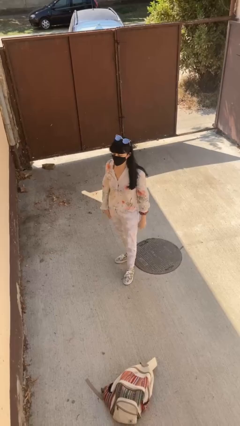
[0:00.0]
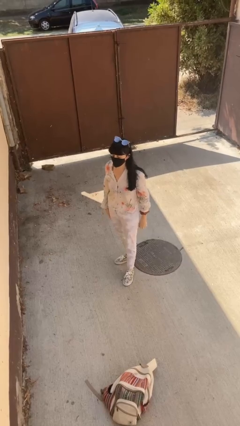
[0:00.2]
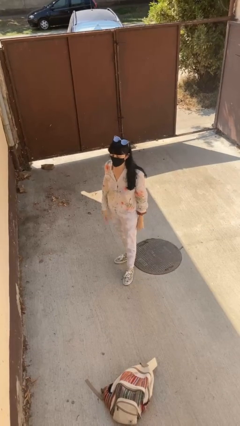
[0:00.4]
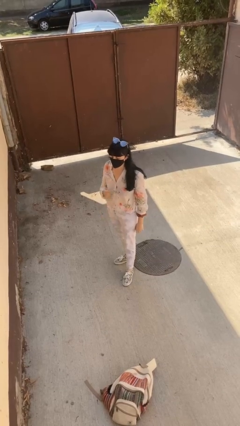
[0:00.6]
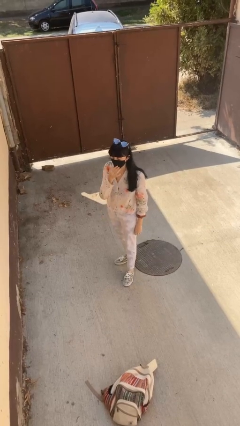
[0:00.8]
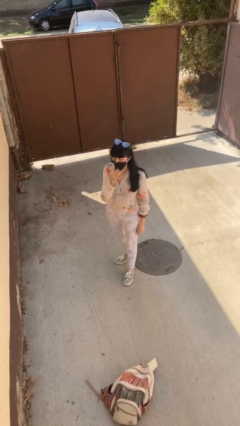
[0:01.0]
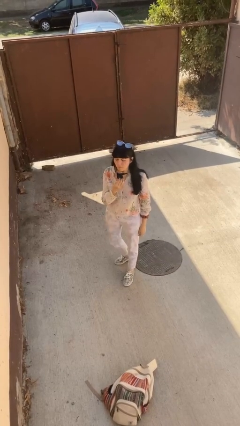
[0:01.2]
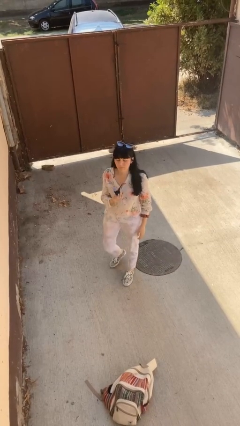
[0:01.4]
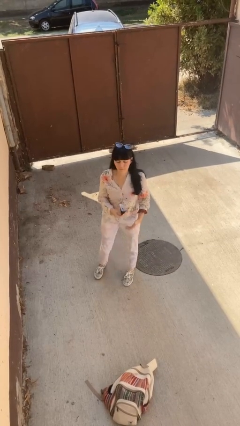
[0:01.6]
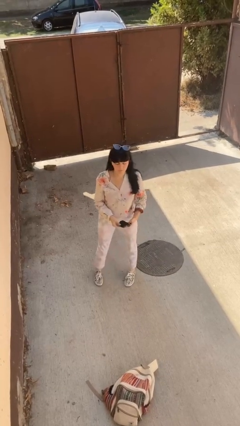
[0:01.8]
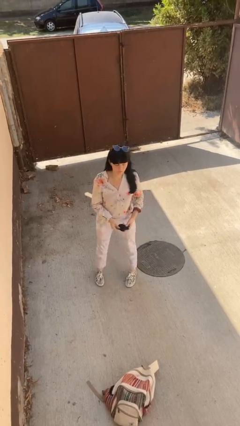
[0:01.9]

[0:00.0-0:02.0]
person takes off facemask

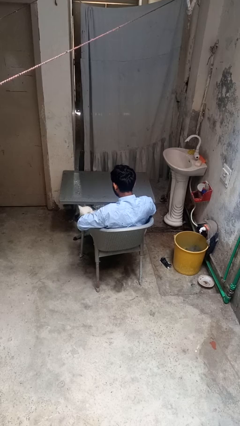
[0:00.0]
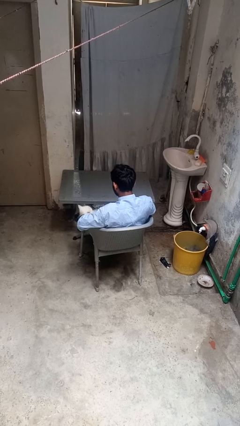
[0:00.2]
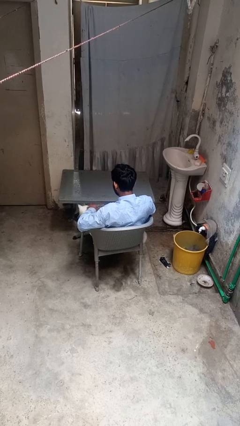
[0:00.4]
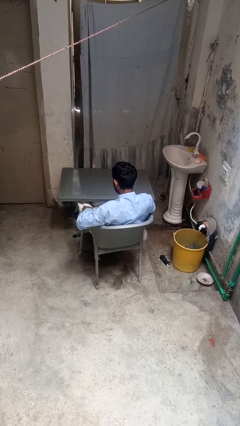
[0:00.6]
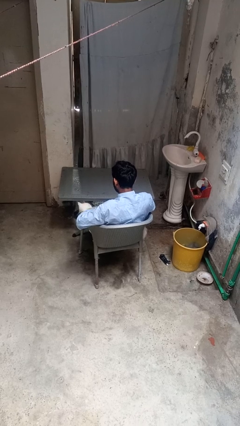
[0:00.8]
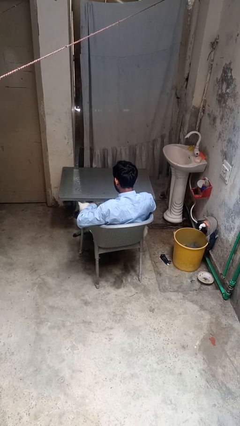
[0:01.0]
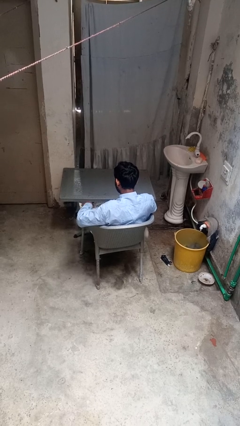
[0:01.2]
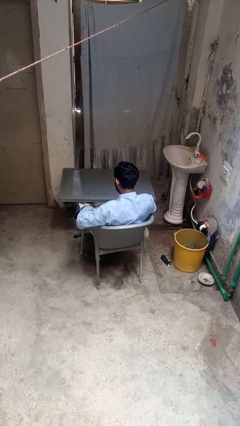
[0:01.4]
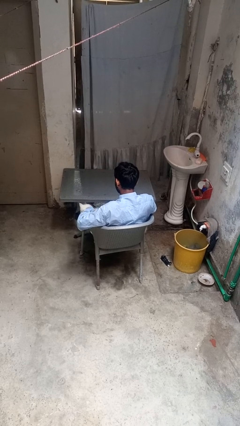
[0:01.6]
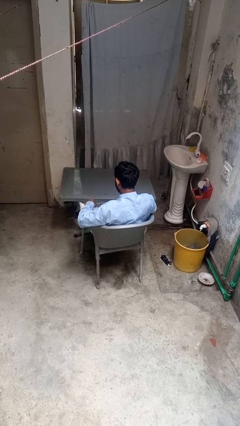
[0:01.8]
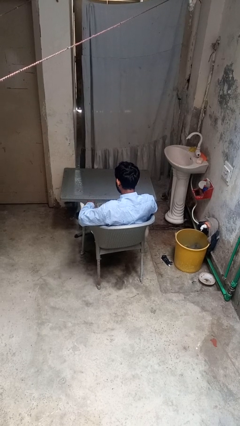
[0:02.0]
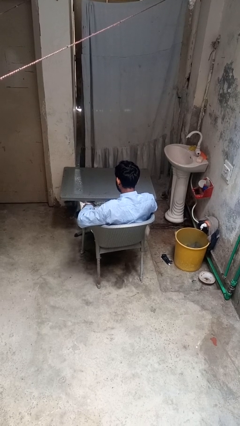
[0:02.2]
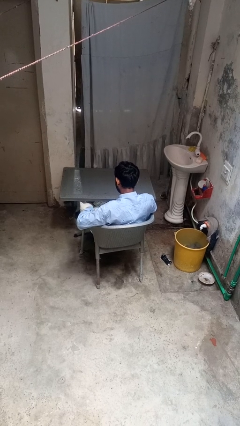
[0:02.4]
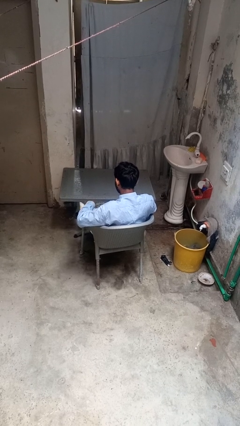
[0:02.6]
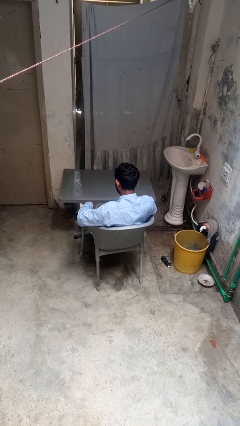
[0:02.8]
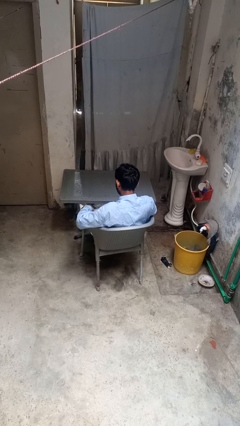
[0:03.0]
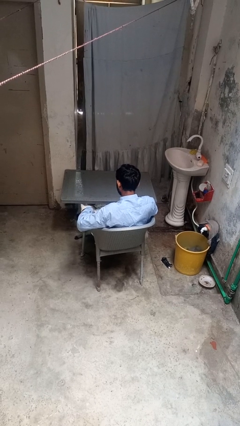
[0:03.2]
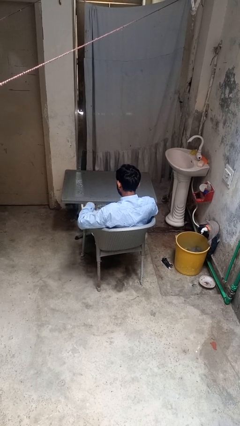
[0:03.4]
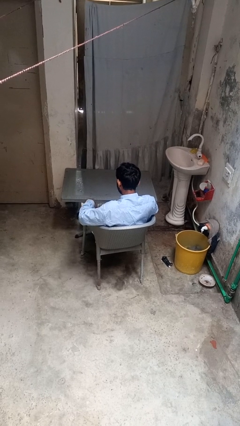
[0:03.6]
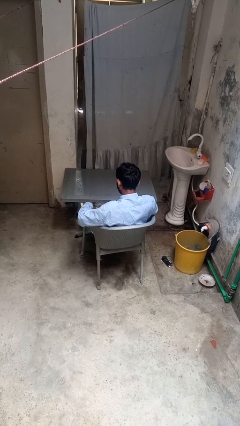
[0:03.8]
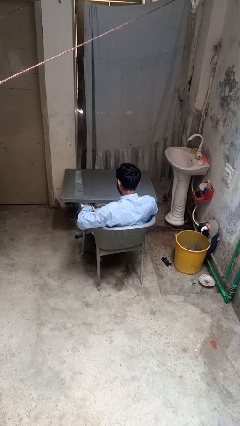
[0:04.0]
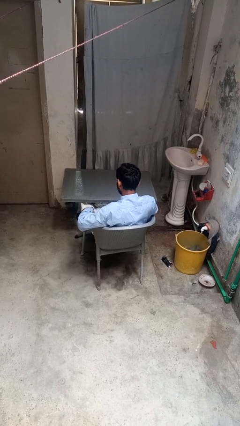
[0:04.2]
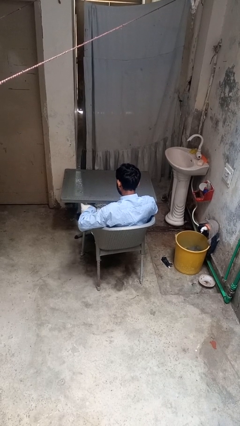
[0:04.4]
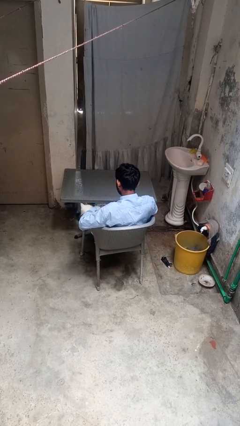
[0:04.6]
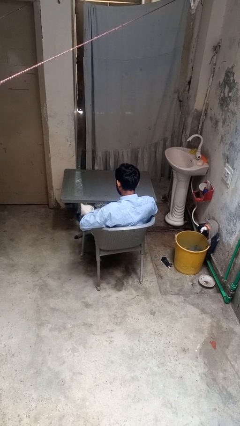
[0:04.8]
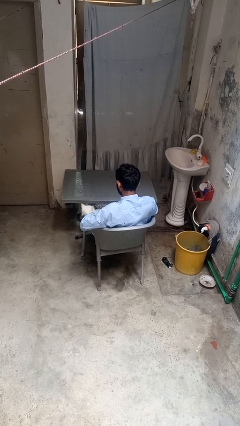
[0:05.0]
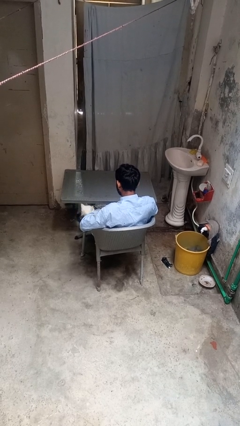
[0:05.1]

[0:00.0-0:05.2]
person pets cat

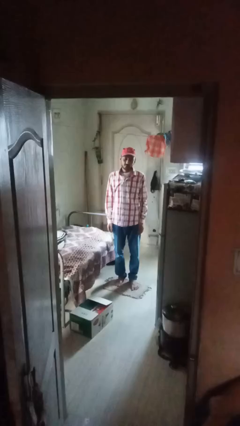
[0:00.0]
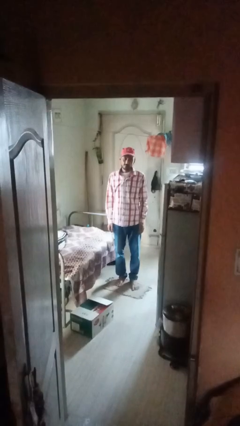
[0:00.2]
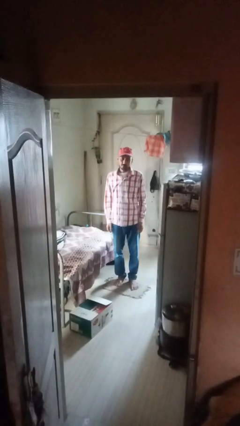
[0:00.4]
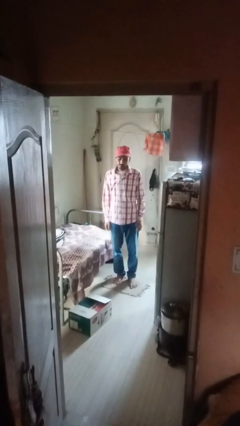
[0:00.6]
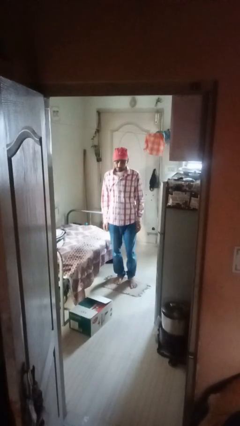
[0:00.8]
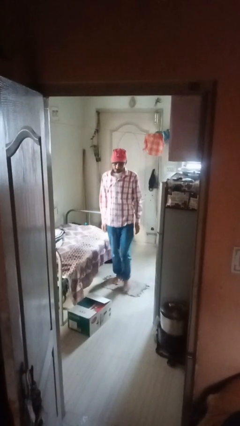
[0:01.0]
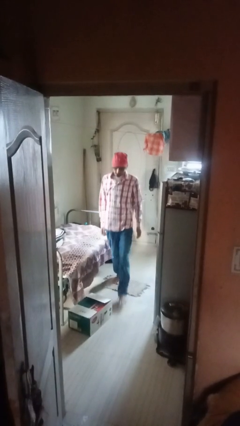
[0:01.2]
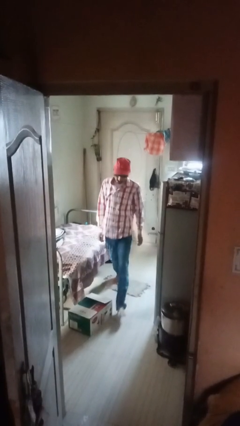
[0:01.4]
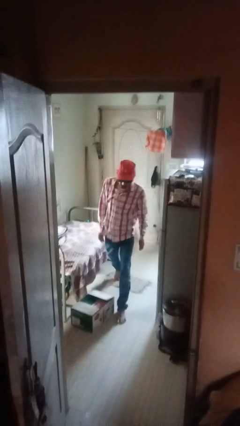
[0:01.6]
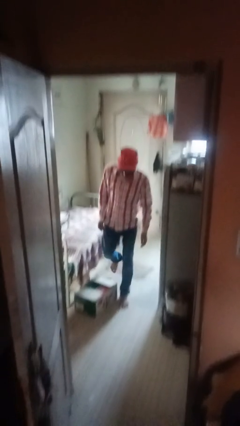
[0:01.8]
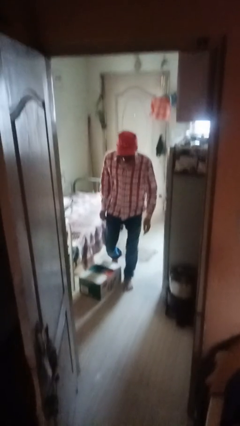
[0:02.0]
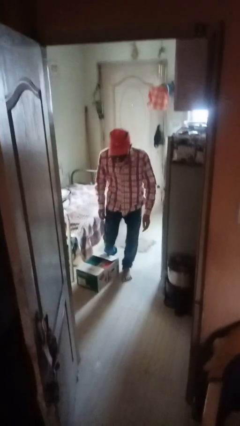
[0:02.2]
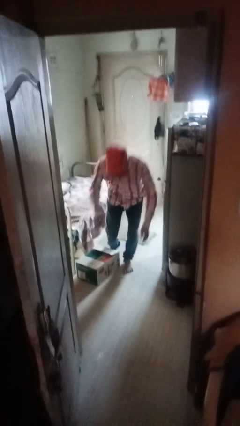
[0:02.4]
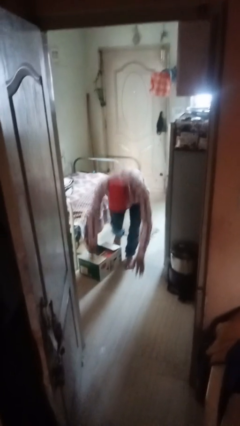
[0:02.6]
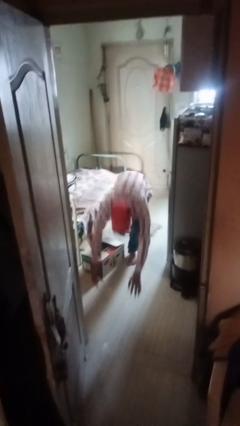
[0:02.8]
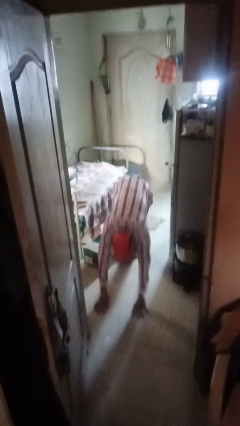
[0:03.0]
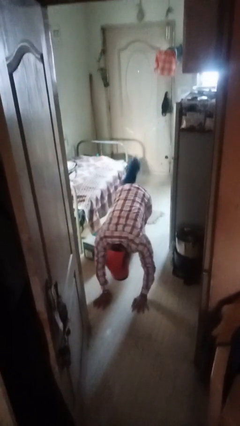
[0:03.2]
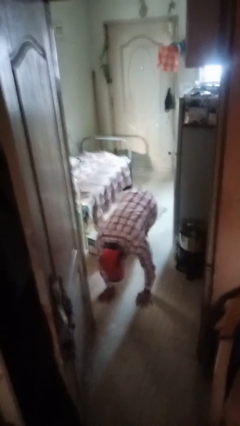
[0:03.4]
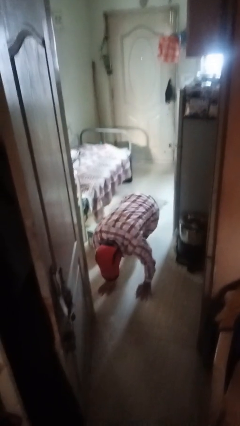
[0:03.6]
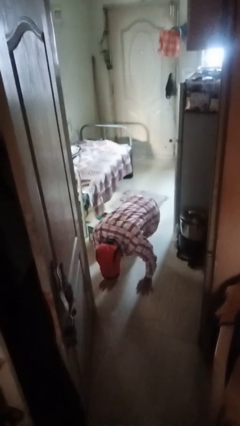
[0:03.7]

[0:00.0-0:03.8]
person trips on object on floor

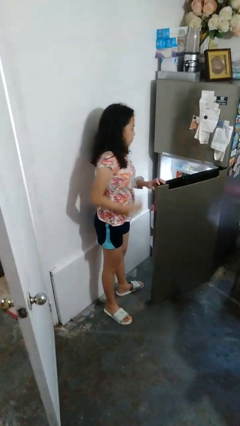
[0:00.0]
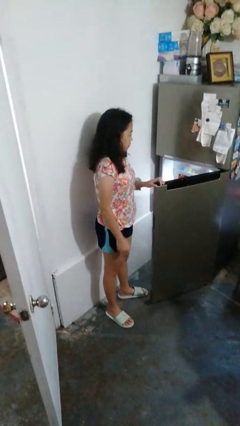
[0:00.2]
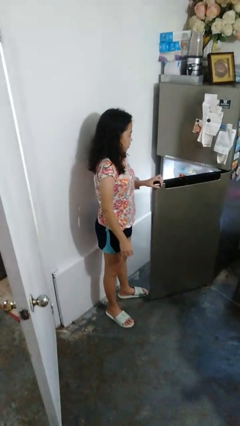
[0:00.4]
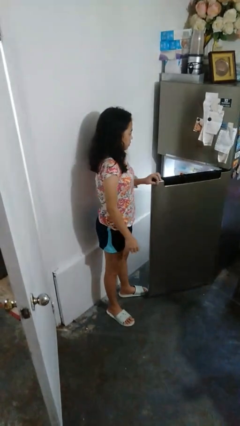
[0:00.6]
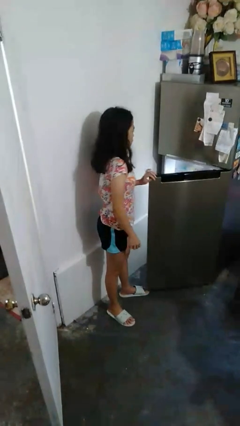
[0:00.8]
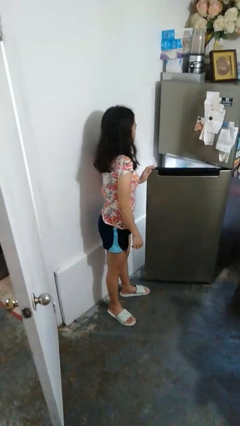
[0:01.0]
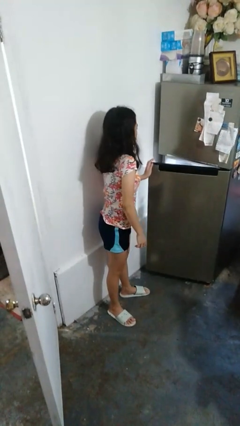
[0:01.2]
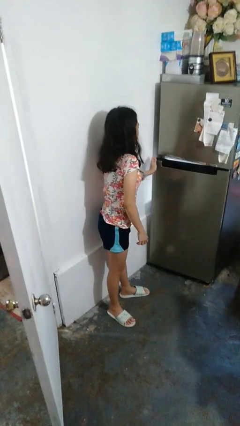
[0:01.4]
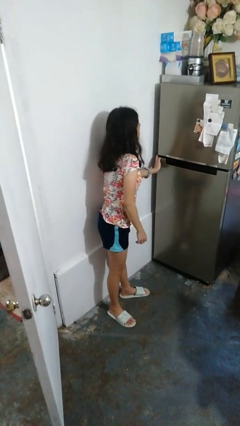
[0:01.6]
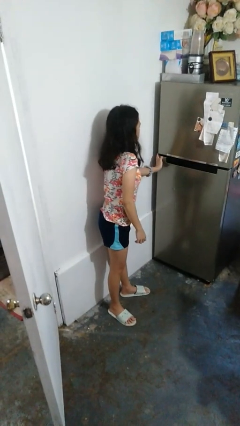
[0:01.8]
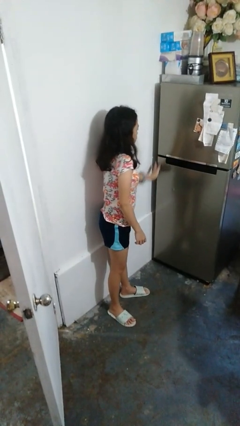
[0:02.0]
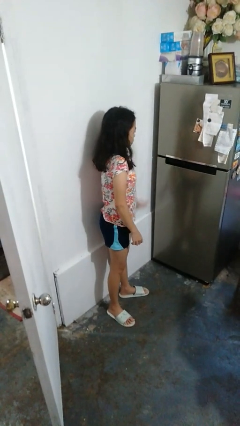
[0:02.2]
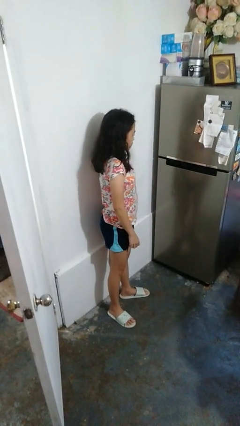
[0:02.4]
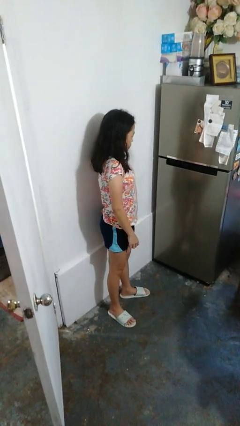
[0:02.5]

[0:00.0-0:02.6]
person closes refrigerator

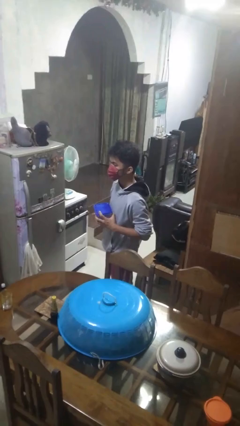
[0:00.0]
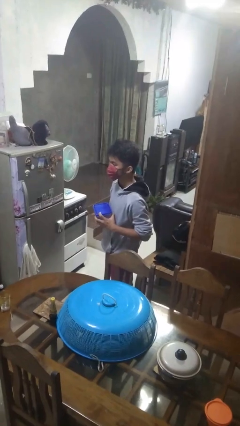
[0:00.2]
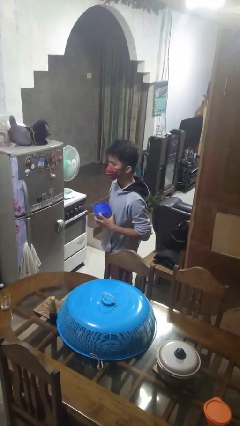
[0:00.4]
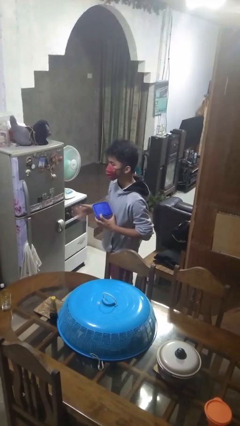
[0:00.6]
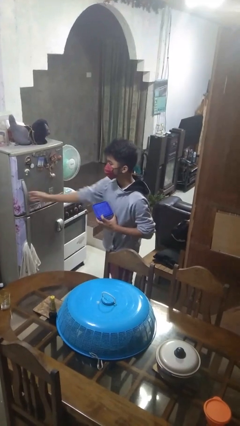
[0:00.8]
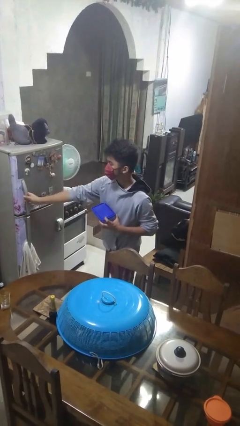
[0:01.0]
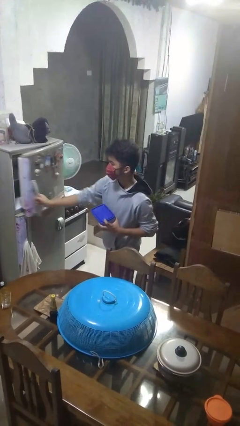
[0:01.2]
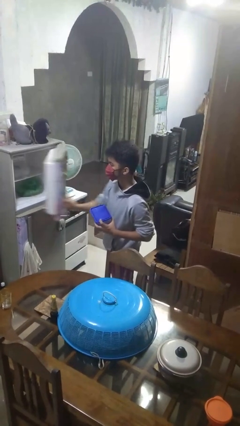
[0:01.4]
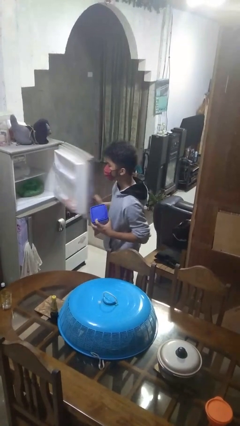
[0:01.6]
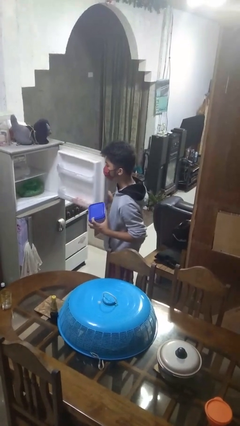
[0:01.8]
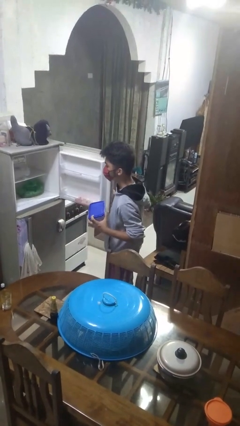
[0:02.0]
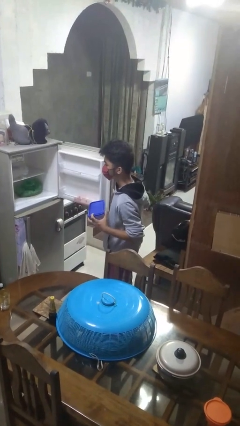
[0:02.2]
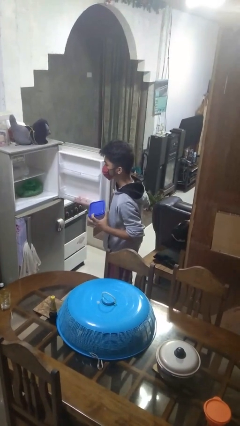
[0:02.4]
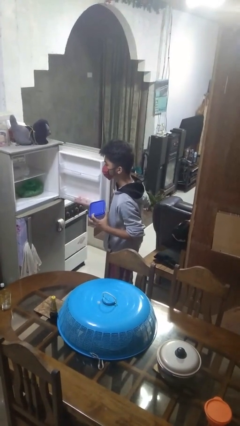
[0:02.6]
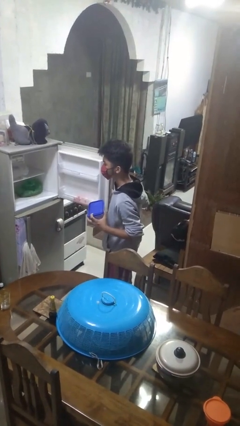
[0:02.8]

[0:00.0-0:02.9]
person opens refrigerator

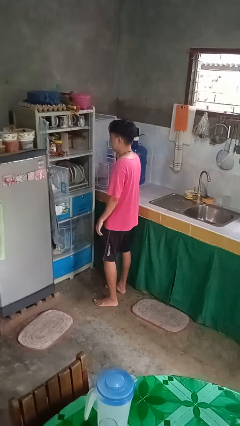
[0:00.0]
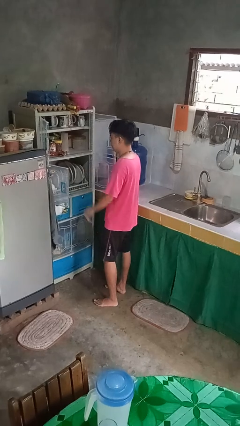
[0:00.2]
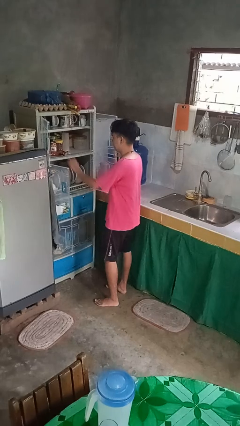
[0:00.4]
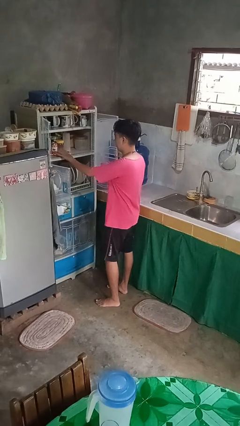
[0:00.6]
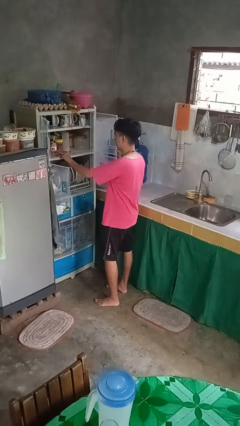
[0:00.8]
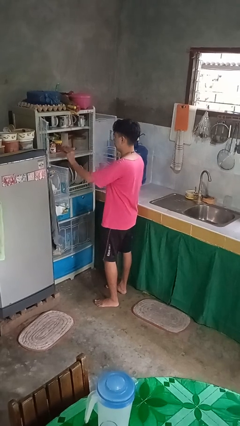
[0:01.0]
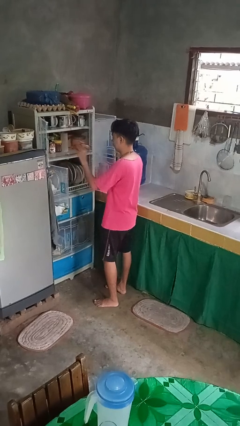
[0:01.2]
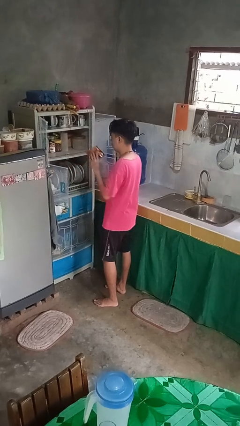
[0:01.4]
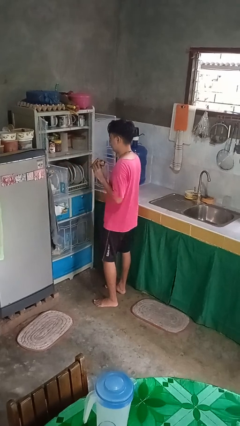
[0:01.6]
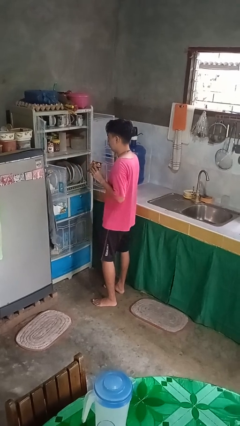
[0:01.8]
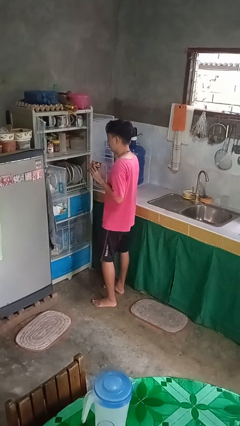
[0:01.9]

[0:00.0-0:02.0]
person takes object from cabinet
